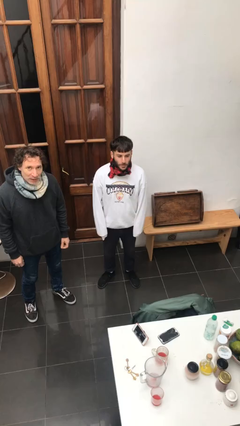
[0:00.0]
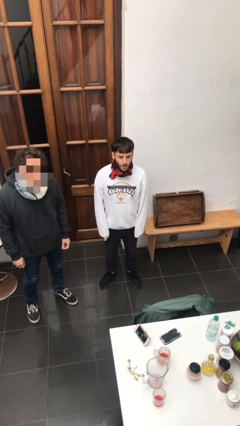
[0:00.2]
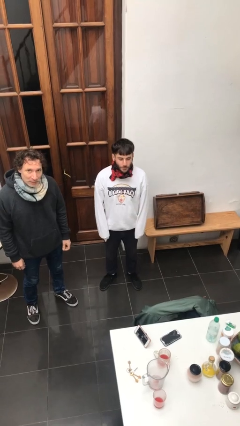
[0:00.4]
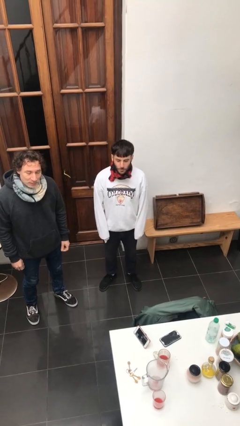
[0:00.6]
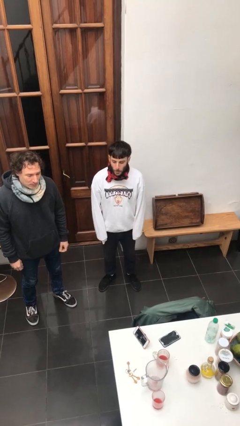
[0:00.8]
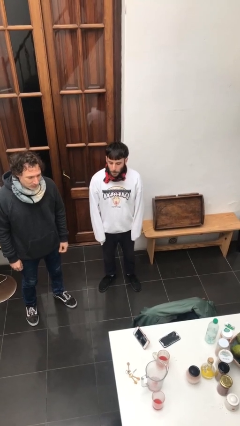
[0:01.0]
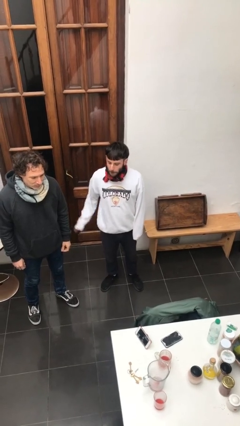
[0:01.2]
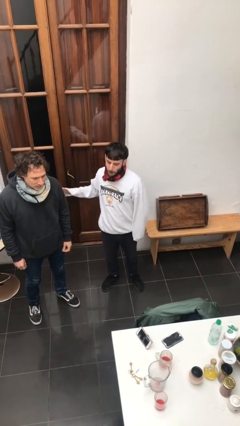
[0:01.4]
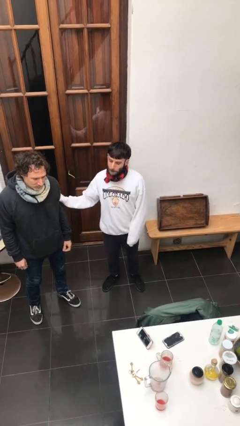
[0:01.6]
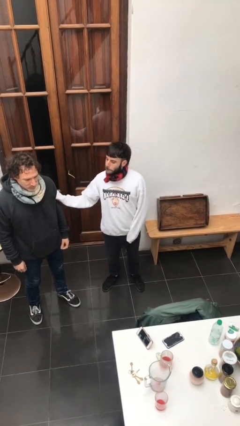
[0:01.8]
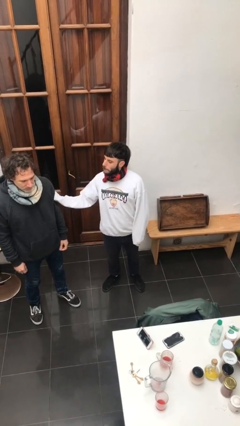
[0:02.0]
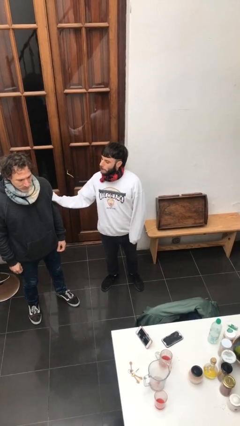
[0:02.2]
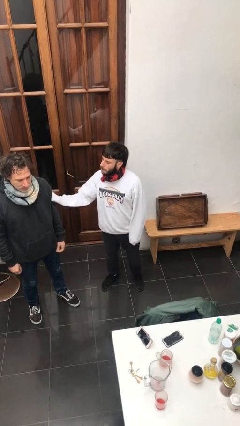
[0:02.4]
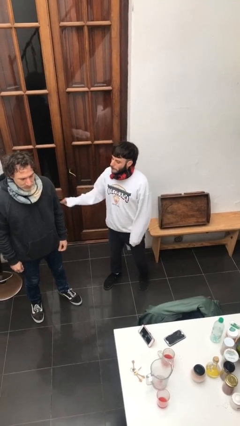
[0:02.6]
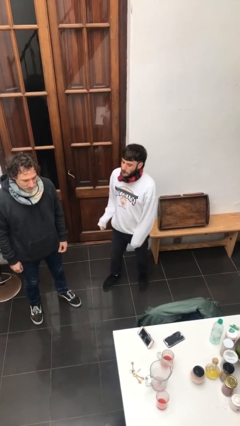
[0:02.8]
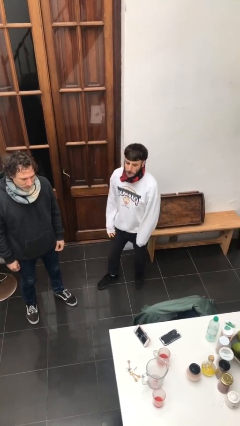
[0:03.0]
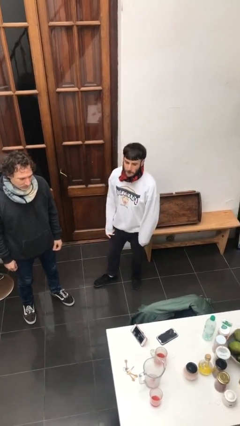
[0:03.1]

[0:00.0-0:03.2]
person grabs person by bicep

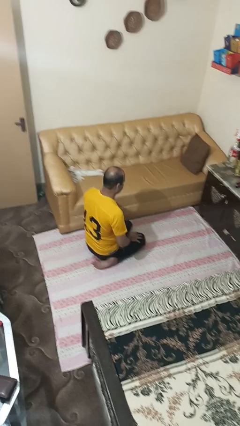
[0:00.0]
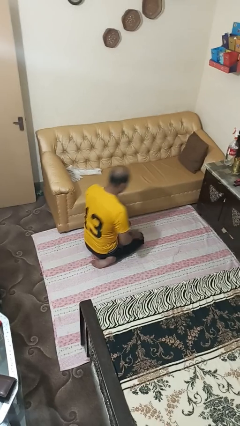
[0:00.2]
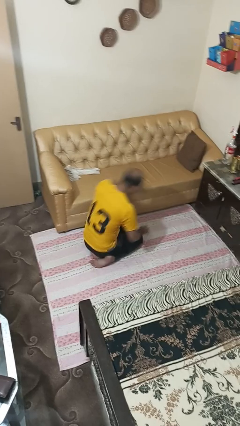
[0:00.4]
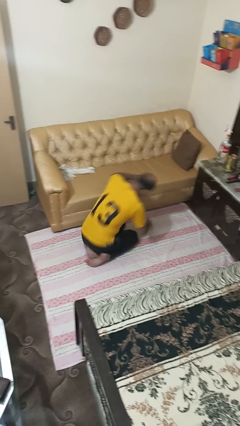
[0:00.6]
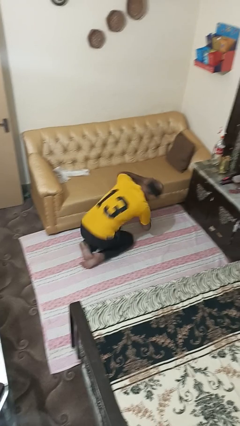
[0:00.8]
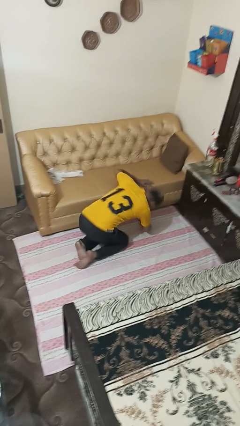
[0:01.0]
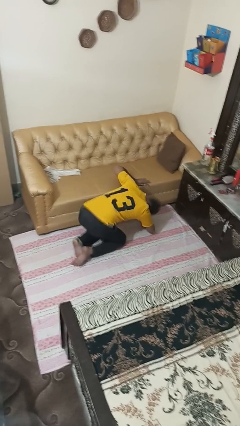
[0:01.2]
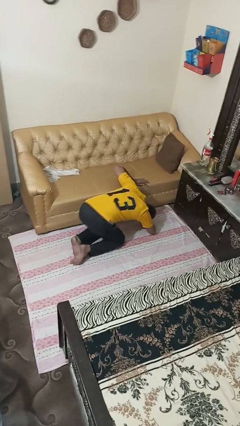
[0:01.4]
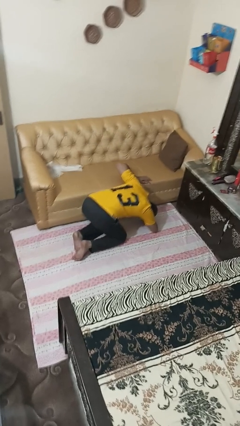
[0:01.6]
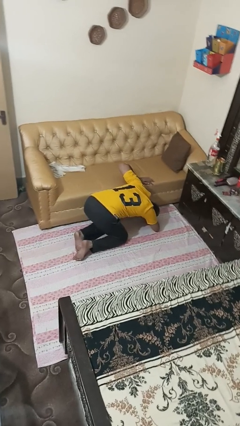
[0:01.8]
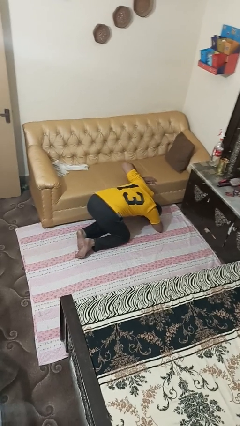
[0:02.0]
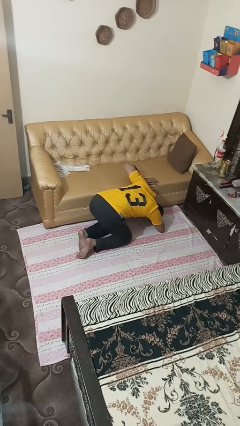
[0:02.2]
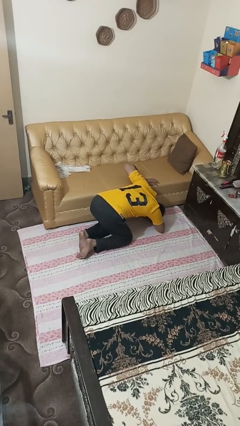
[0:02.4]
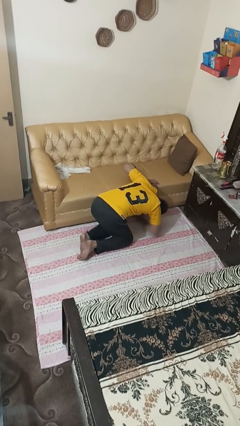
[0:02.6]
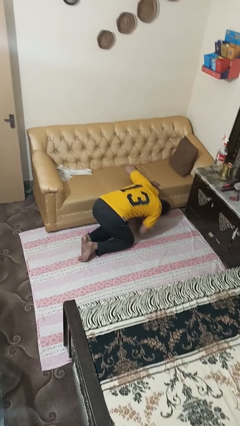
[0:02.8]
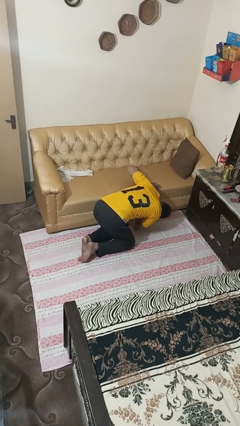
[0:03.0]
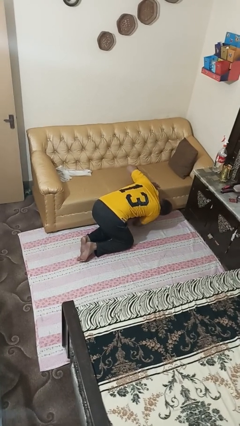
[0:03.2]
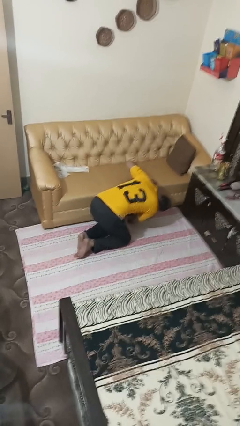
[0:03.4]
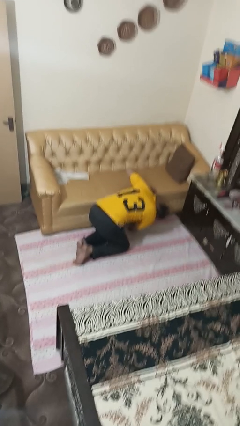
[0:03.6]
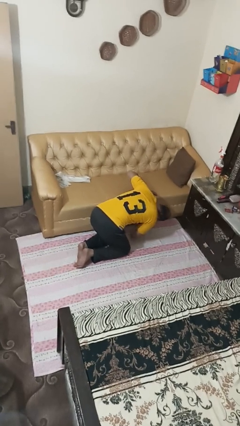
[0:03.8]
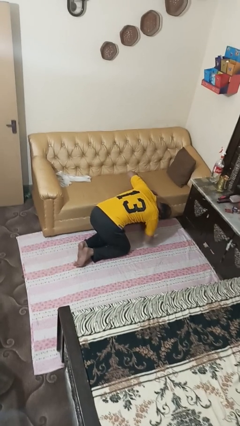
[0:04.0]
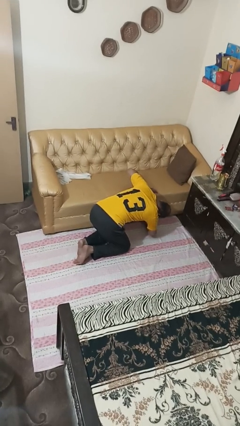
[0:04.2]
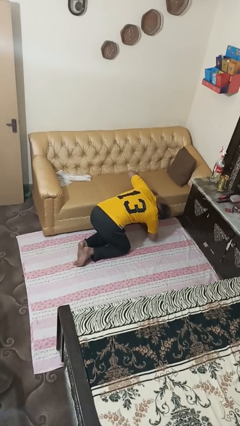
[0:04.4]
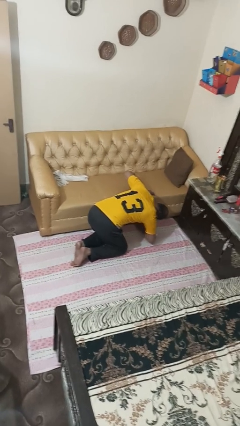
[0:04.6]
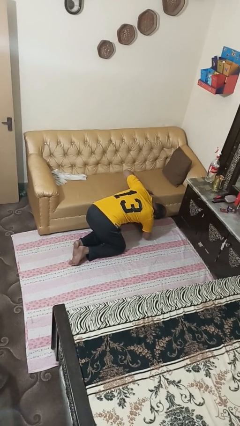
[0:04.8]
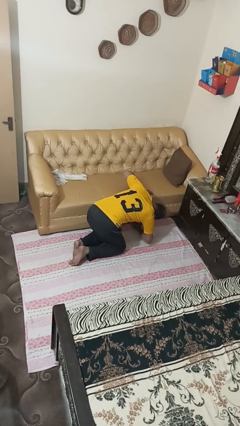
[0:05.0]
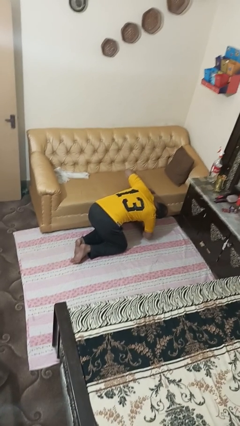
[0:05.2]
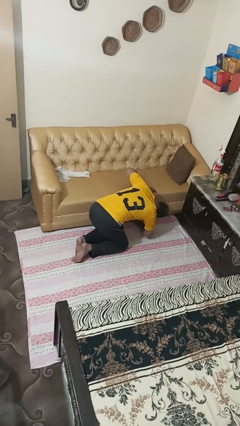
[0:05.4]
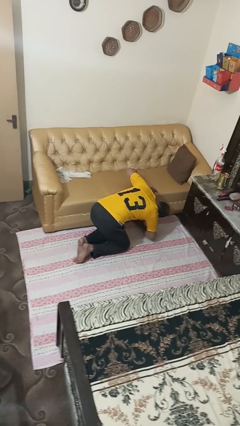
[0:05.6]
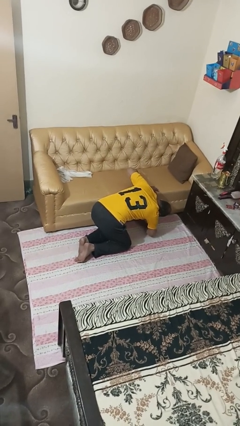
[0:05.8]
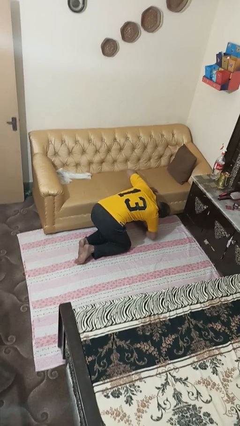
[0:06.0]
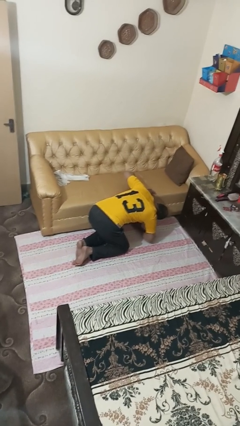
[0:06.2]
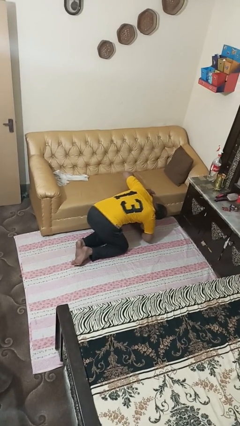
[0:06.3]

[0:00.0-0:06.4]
person searches under couch

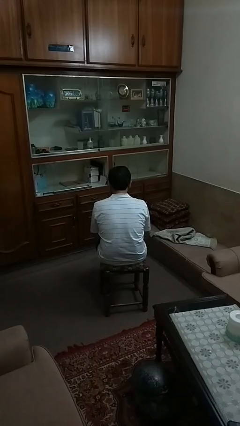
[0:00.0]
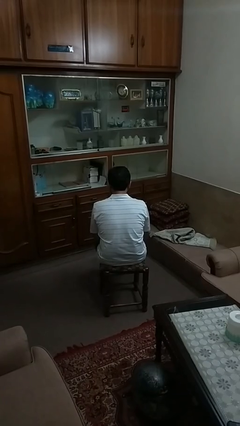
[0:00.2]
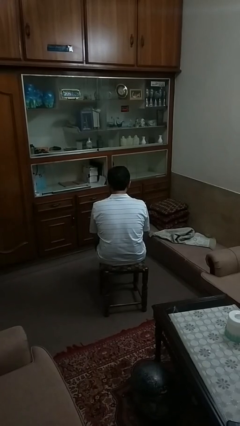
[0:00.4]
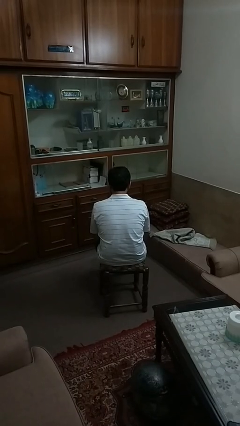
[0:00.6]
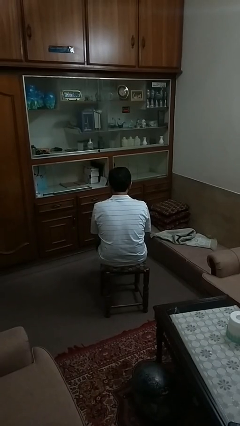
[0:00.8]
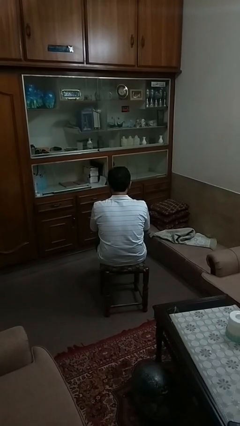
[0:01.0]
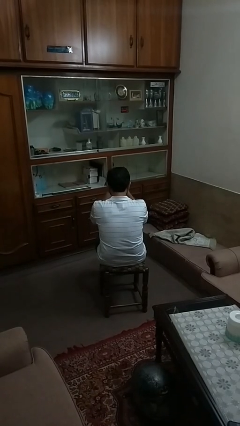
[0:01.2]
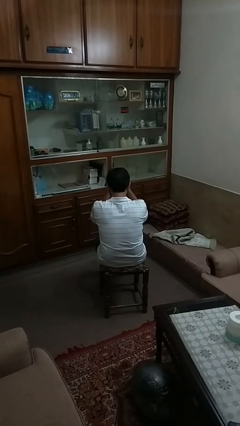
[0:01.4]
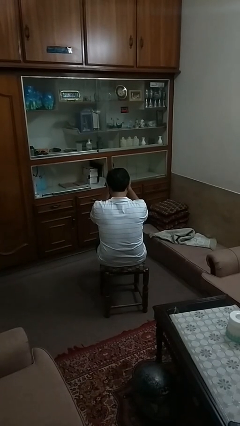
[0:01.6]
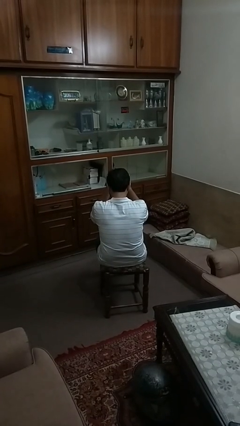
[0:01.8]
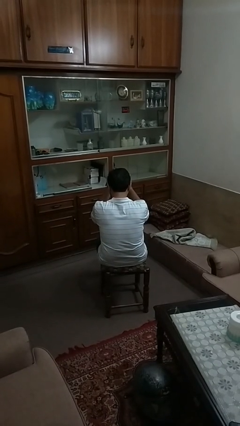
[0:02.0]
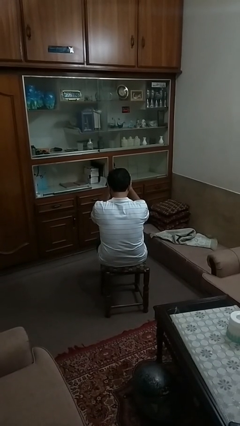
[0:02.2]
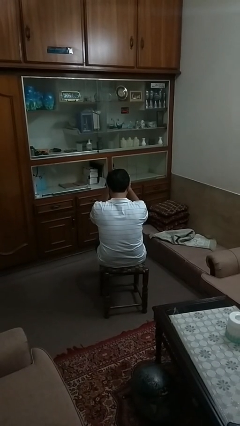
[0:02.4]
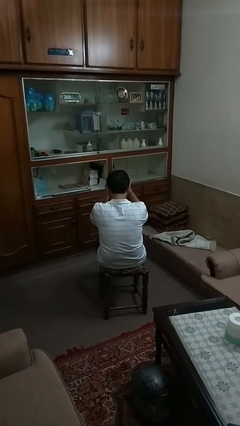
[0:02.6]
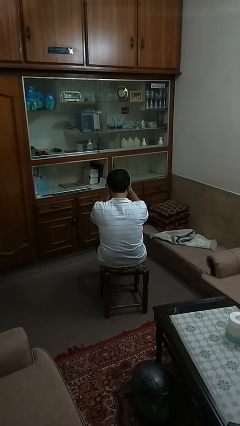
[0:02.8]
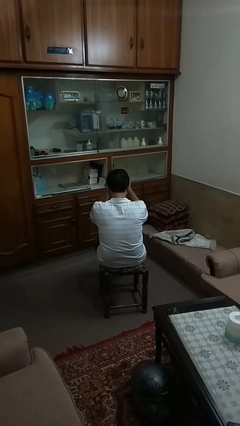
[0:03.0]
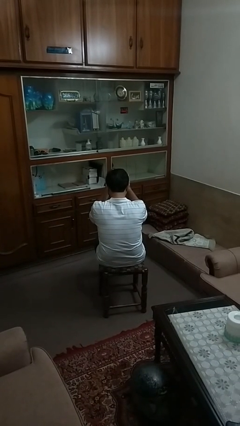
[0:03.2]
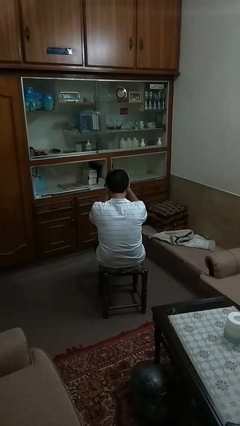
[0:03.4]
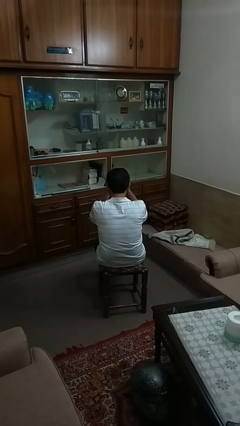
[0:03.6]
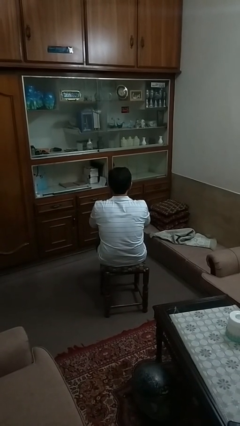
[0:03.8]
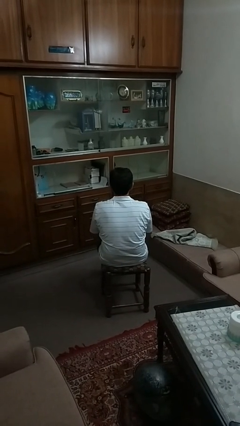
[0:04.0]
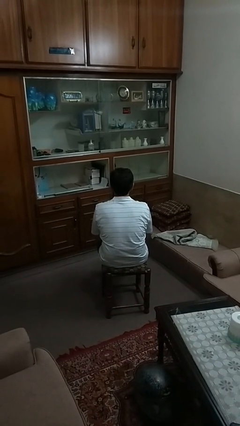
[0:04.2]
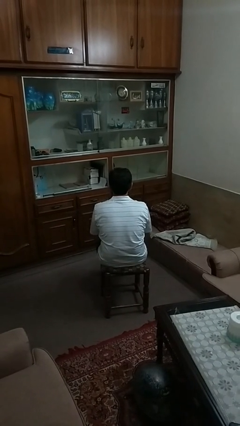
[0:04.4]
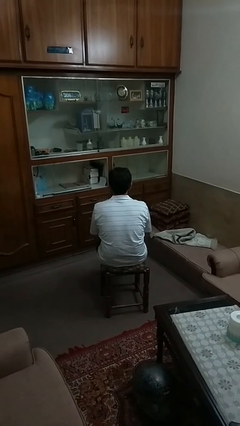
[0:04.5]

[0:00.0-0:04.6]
person prays

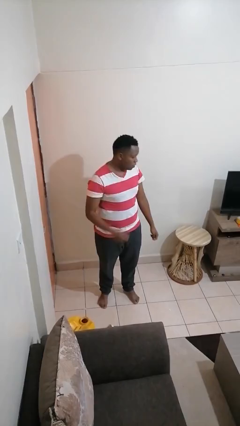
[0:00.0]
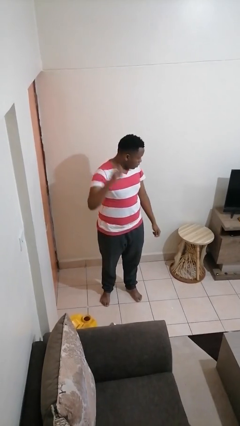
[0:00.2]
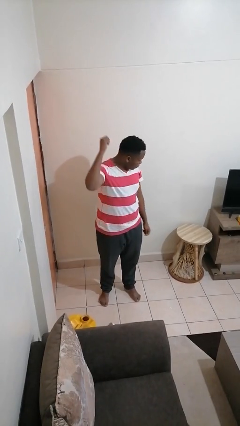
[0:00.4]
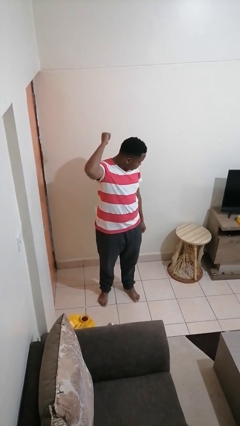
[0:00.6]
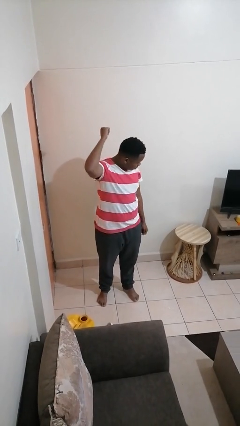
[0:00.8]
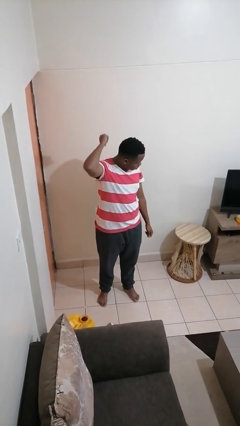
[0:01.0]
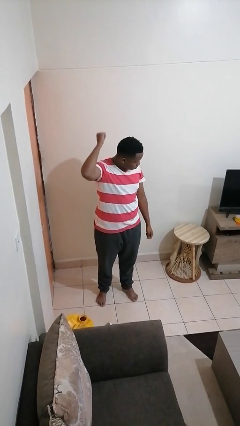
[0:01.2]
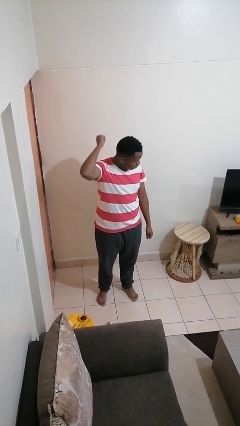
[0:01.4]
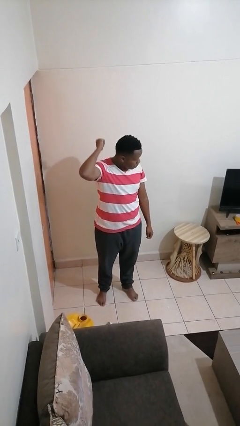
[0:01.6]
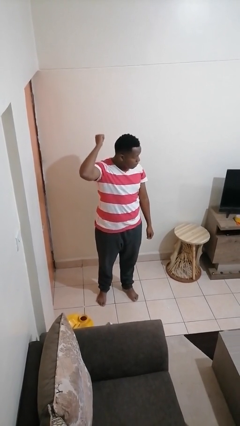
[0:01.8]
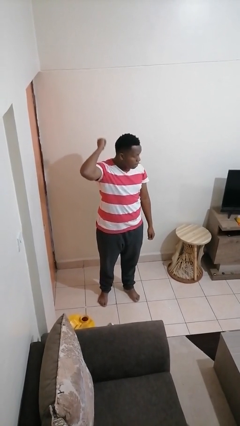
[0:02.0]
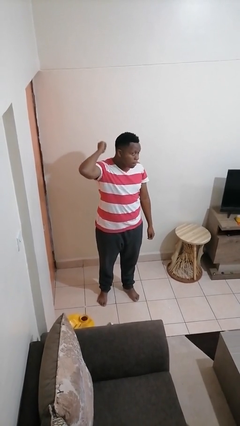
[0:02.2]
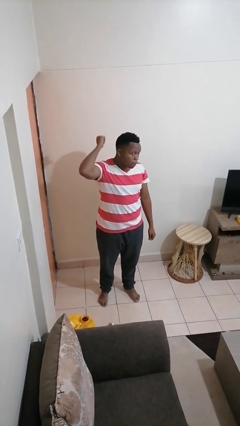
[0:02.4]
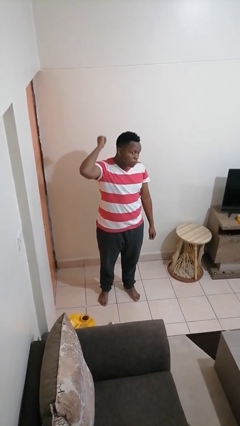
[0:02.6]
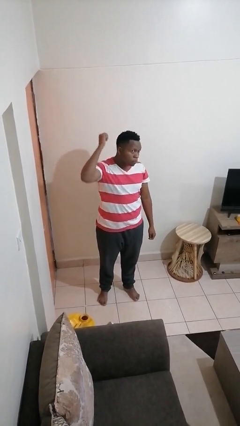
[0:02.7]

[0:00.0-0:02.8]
person gestures behind me

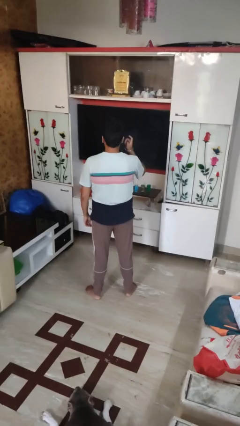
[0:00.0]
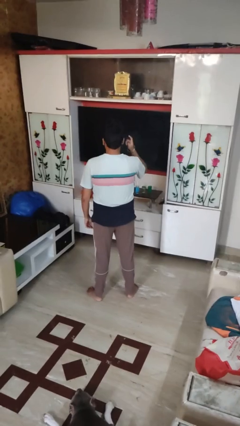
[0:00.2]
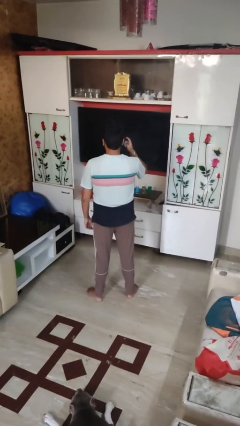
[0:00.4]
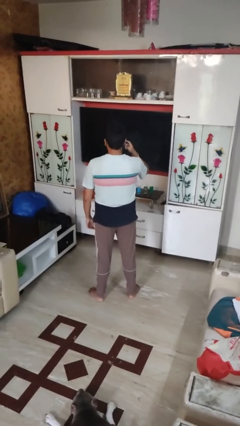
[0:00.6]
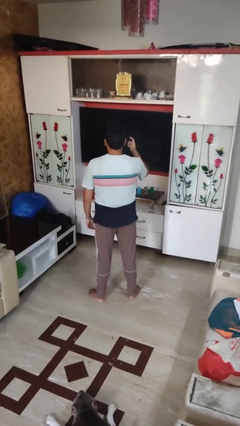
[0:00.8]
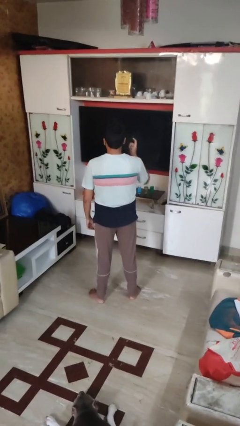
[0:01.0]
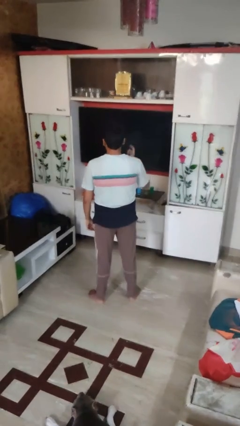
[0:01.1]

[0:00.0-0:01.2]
person gestures listen closely
